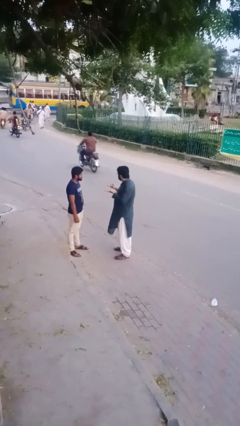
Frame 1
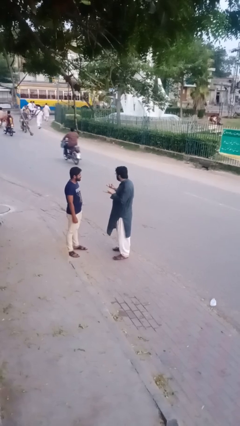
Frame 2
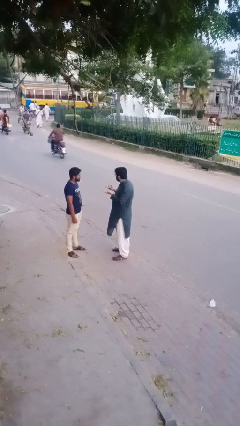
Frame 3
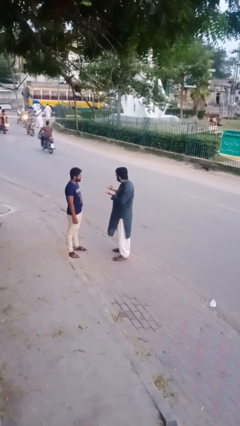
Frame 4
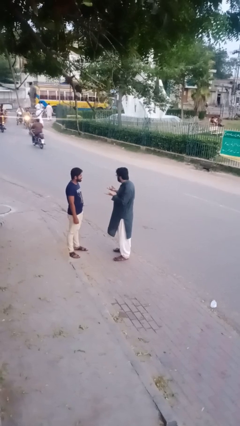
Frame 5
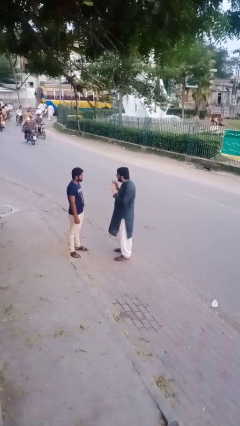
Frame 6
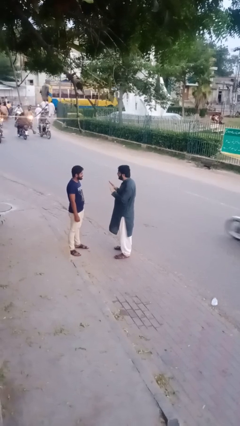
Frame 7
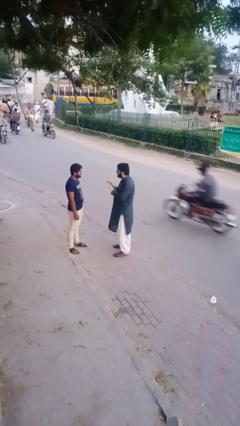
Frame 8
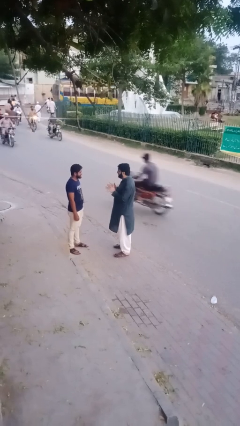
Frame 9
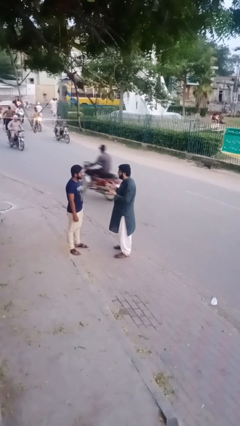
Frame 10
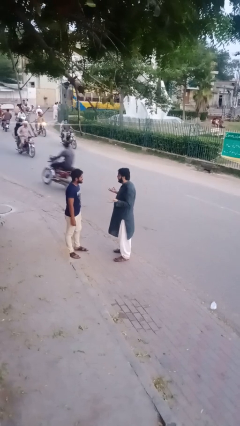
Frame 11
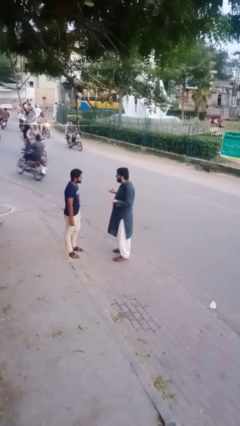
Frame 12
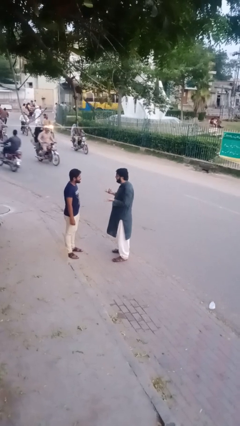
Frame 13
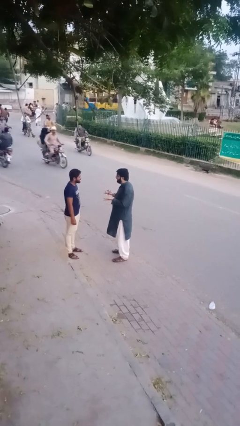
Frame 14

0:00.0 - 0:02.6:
person talks to person

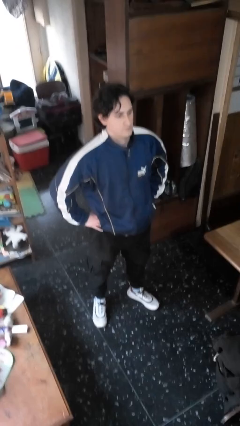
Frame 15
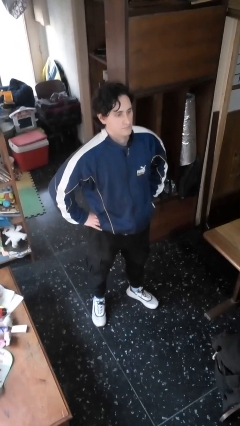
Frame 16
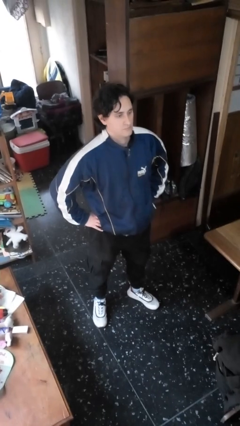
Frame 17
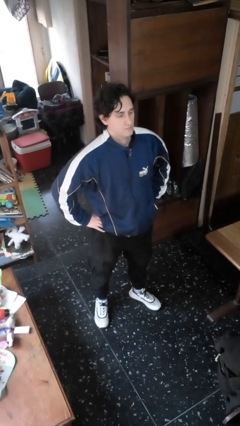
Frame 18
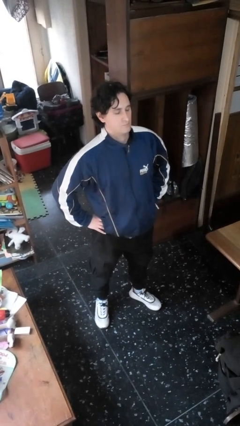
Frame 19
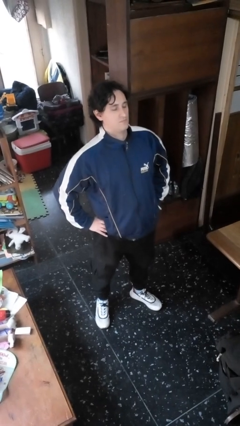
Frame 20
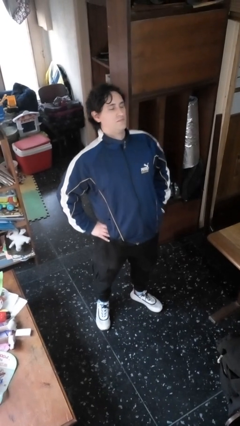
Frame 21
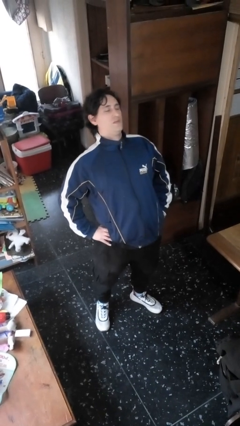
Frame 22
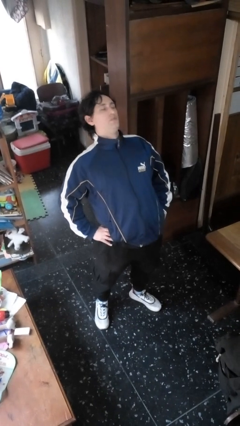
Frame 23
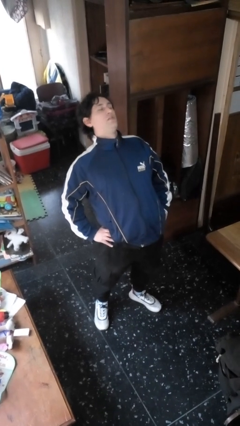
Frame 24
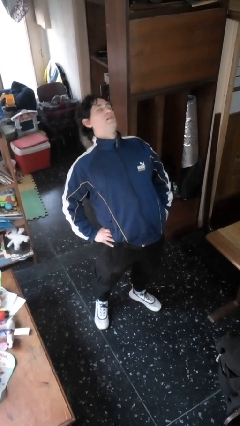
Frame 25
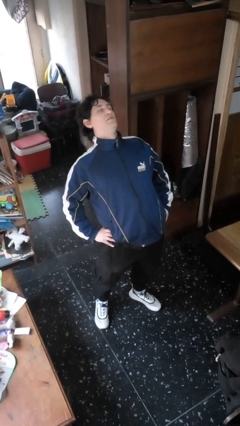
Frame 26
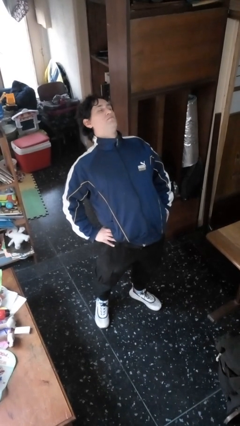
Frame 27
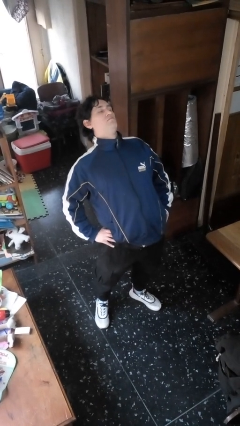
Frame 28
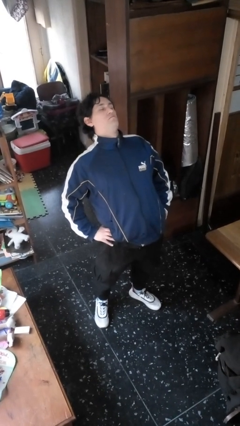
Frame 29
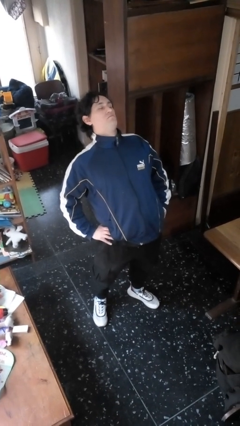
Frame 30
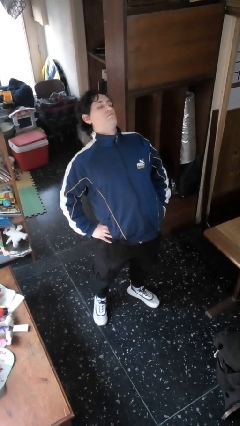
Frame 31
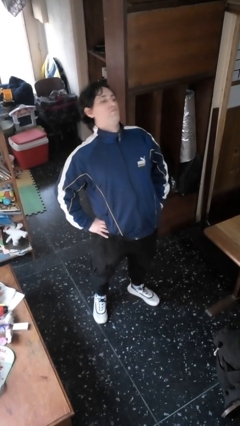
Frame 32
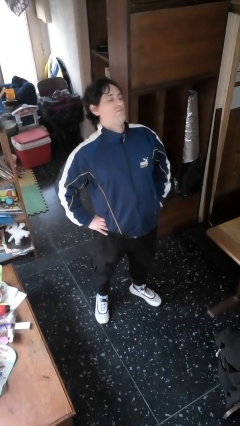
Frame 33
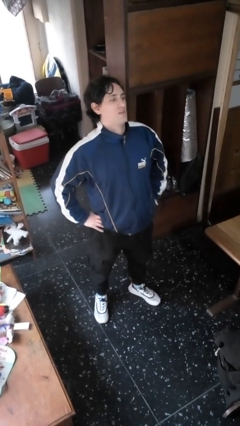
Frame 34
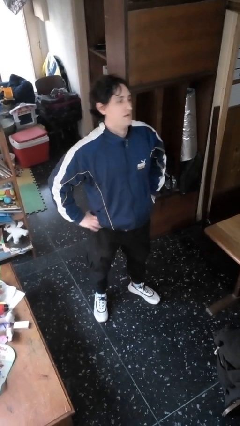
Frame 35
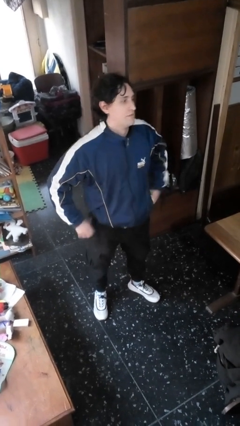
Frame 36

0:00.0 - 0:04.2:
person stretches back

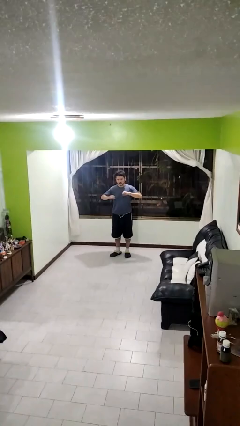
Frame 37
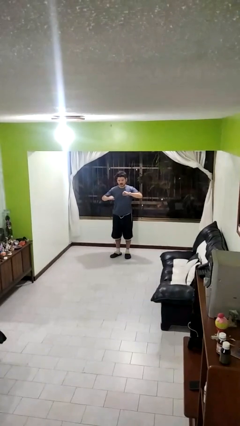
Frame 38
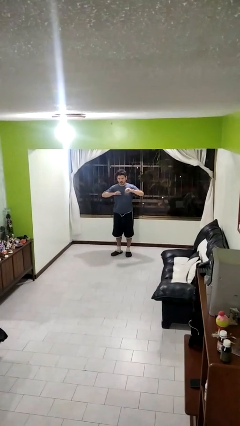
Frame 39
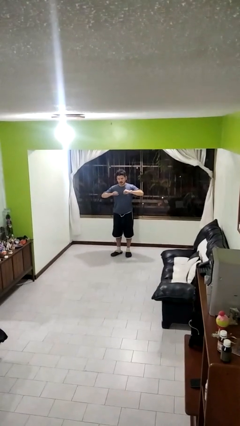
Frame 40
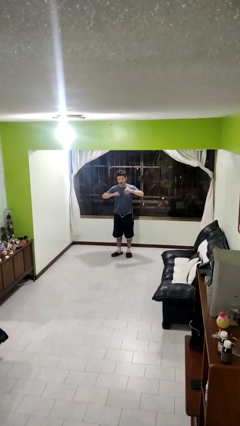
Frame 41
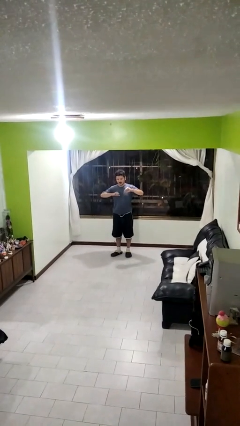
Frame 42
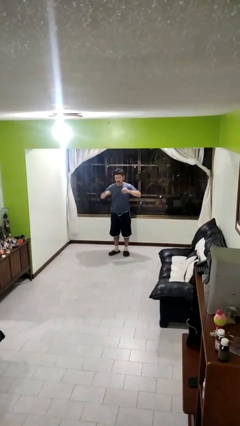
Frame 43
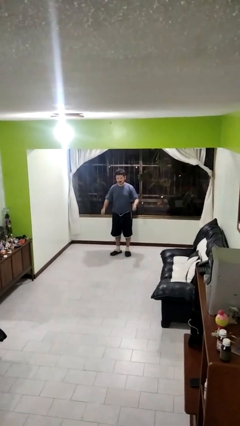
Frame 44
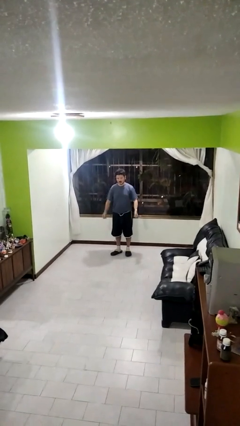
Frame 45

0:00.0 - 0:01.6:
person drums on chest

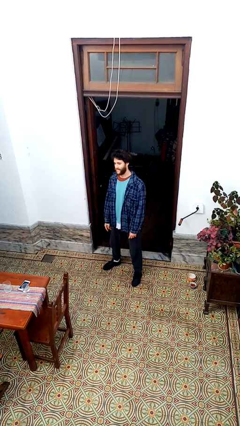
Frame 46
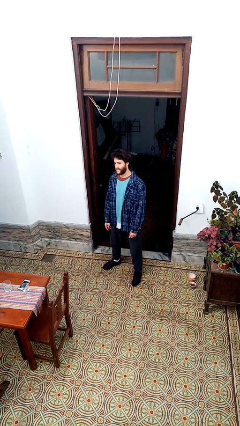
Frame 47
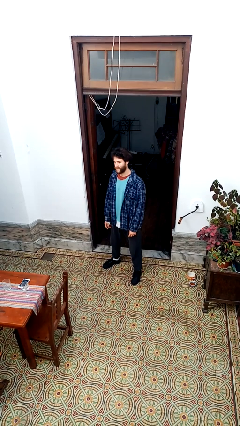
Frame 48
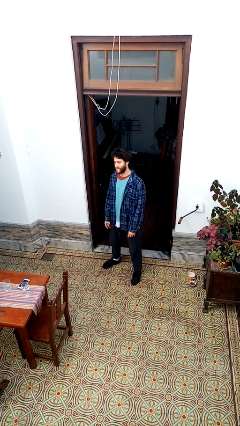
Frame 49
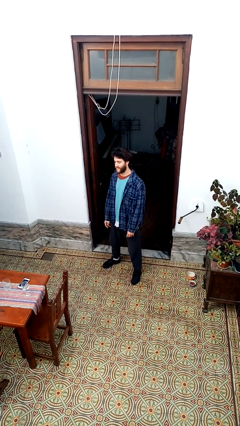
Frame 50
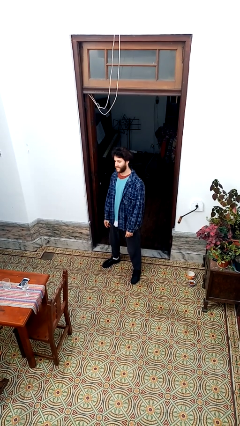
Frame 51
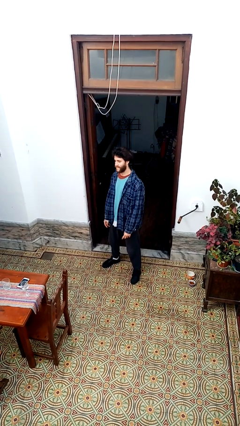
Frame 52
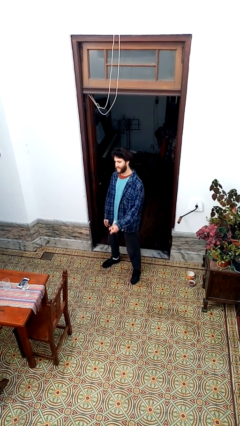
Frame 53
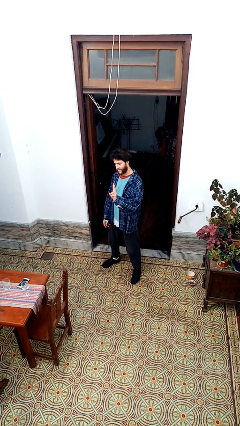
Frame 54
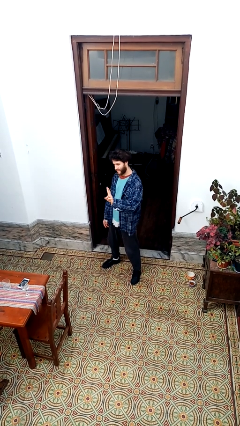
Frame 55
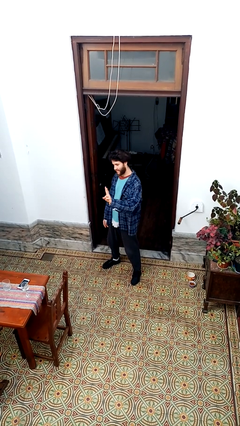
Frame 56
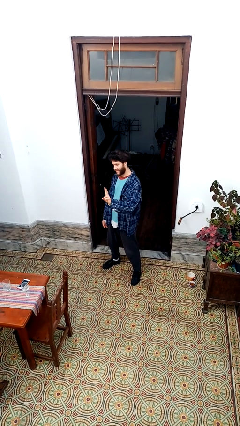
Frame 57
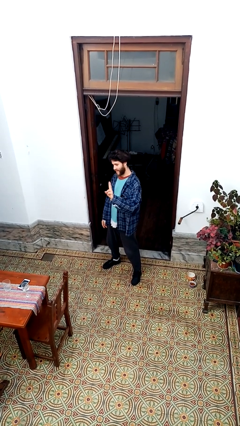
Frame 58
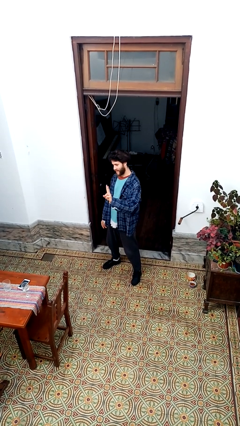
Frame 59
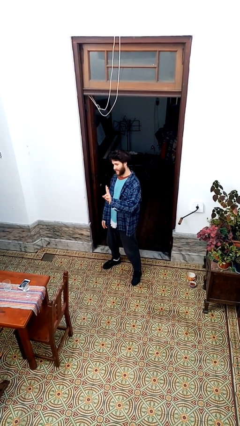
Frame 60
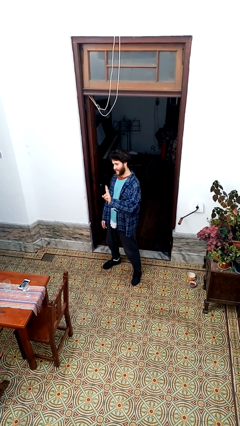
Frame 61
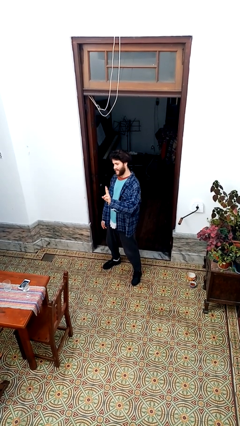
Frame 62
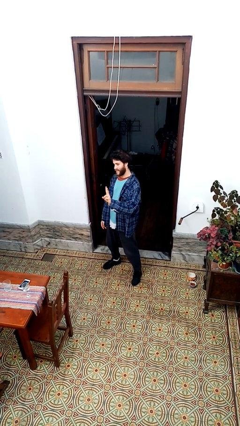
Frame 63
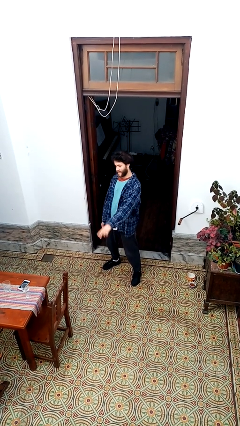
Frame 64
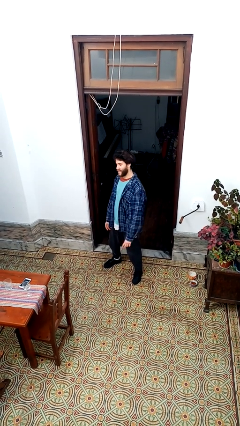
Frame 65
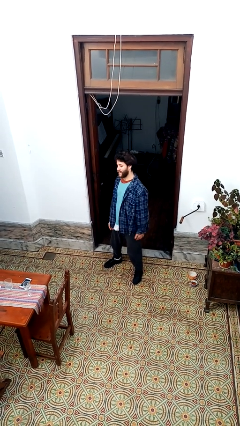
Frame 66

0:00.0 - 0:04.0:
person gestures peace

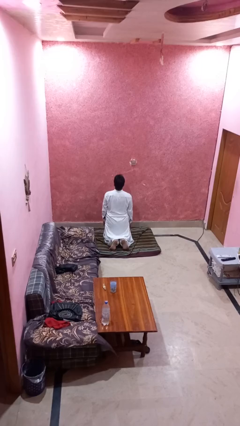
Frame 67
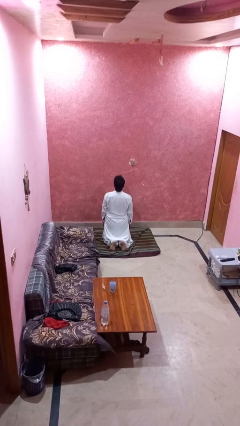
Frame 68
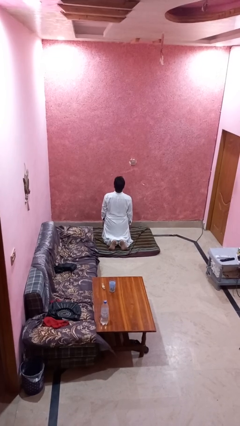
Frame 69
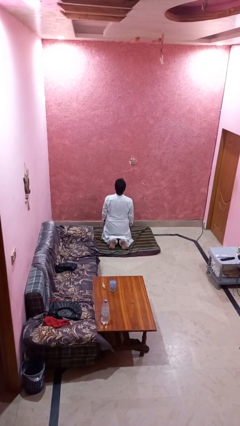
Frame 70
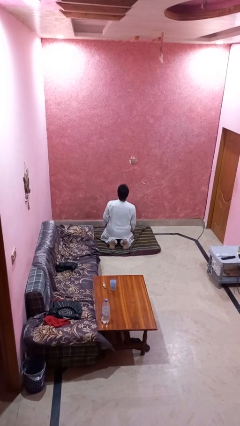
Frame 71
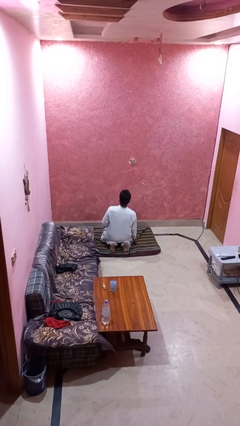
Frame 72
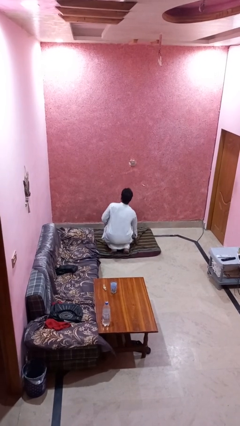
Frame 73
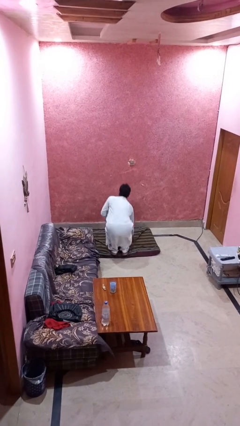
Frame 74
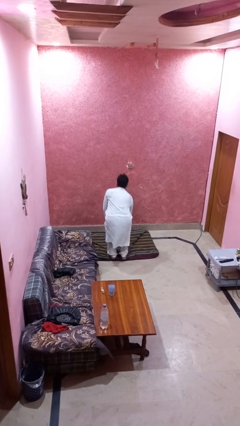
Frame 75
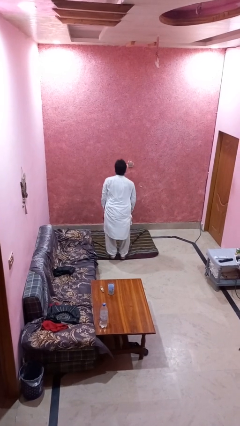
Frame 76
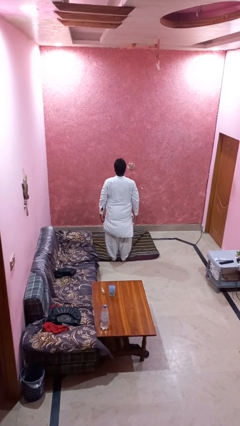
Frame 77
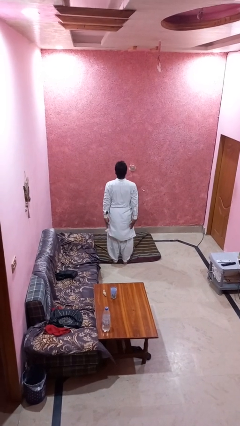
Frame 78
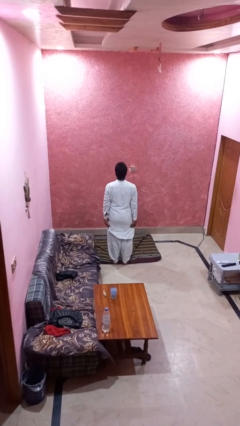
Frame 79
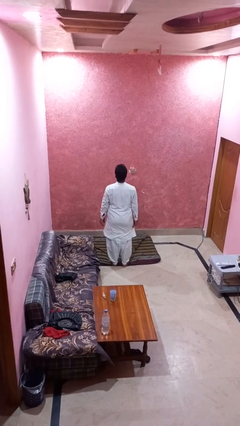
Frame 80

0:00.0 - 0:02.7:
person stands up from floor

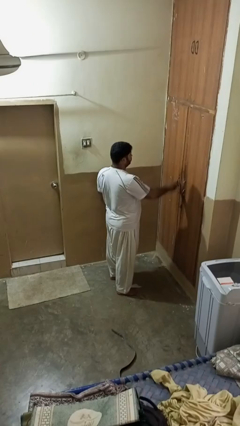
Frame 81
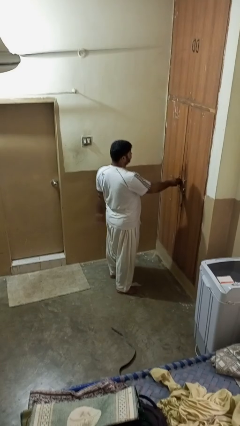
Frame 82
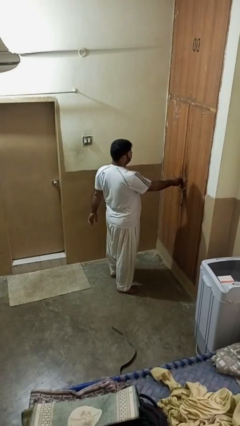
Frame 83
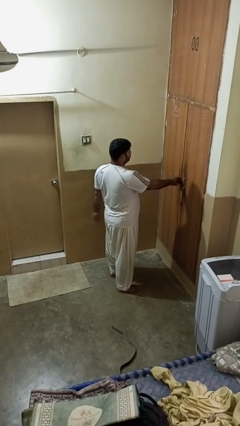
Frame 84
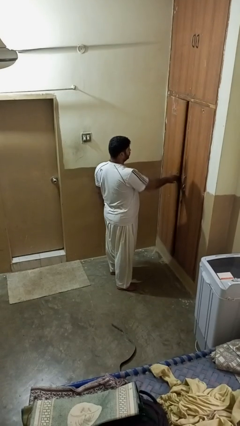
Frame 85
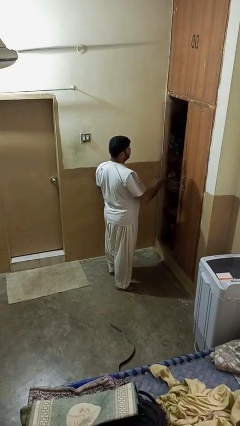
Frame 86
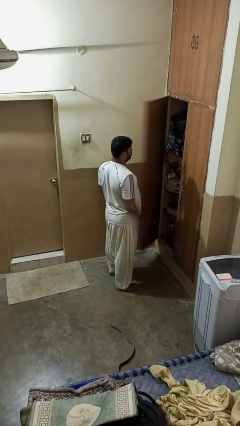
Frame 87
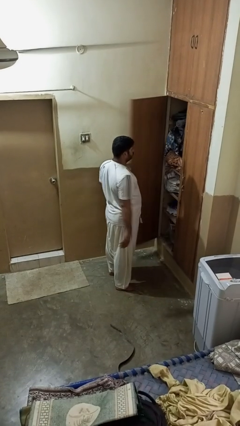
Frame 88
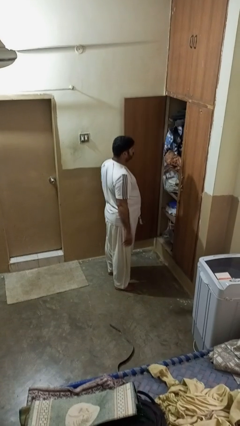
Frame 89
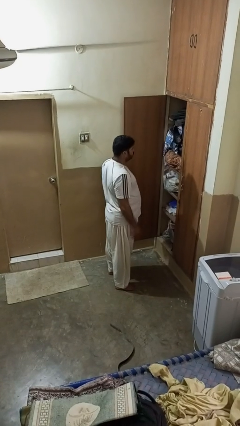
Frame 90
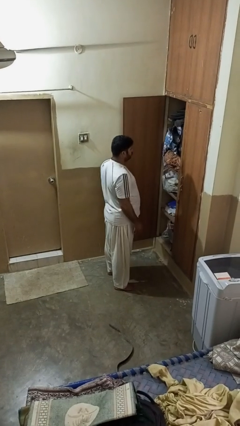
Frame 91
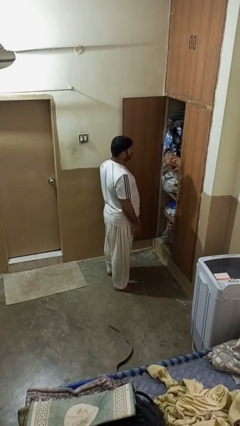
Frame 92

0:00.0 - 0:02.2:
person opens closet door
